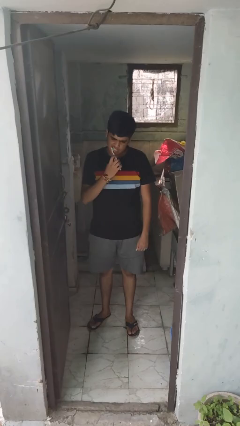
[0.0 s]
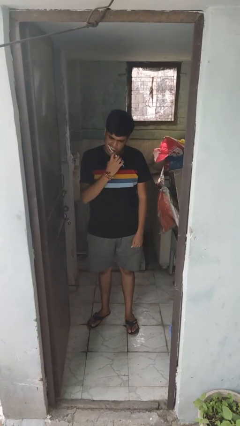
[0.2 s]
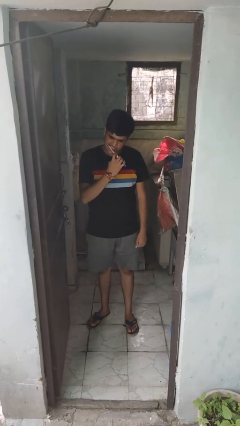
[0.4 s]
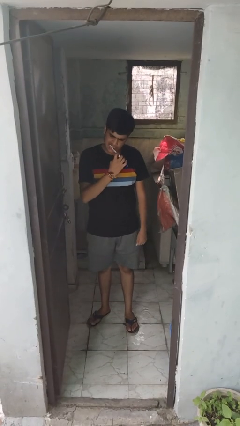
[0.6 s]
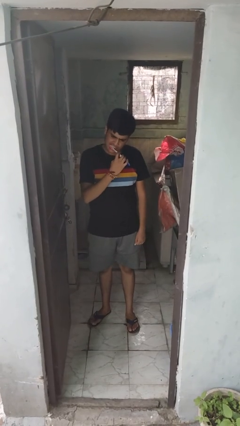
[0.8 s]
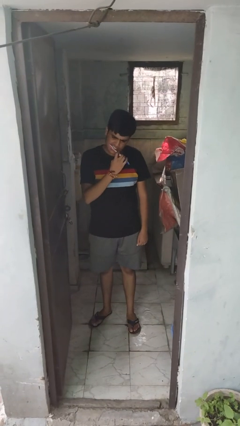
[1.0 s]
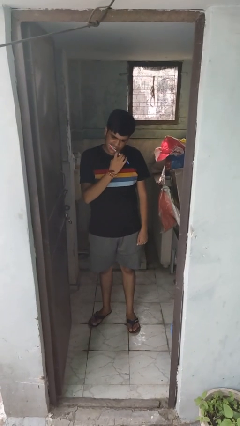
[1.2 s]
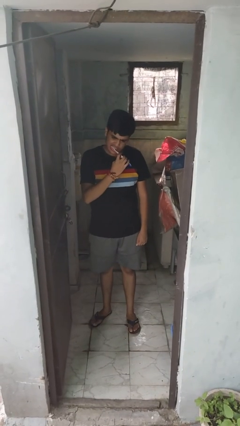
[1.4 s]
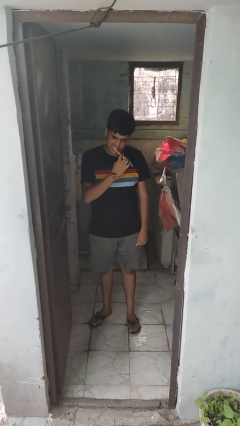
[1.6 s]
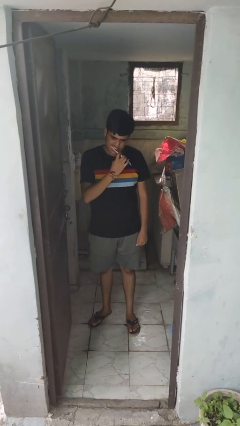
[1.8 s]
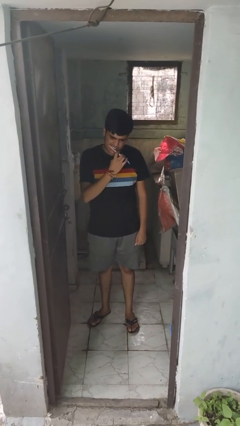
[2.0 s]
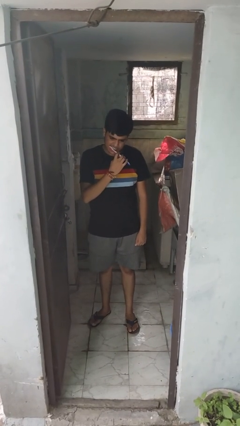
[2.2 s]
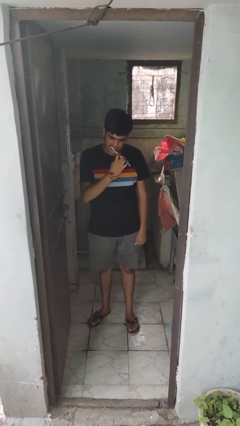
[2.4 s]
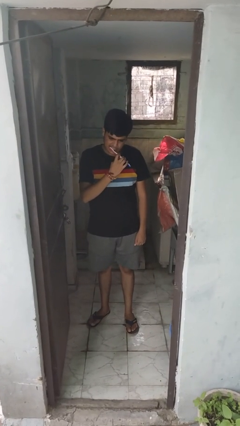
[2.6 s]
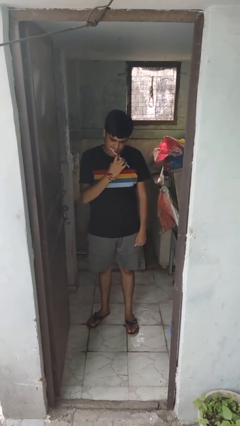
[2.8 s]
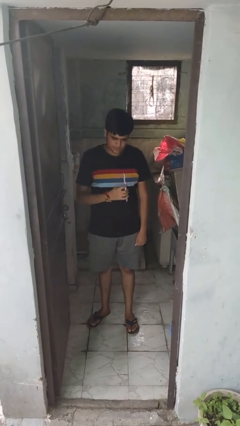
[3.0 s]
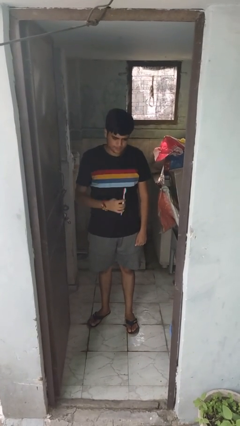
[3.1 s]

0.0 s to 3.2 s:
person brushes teeth

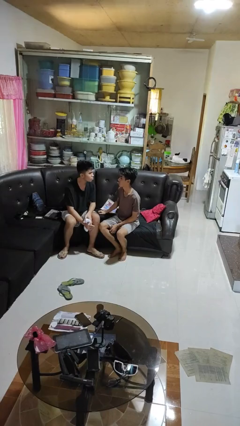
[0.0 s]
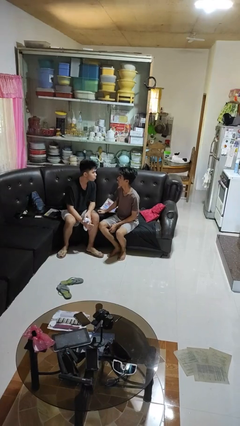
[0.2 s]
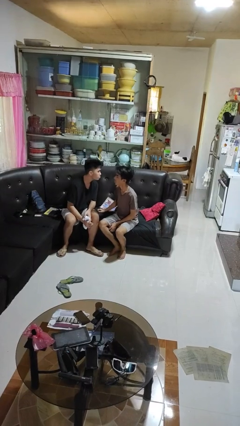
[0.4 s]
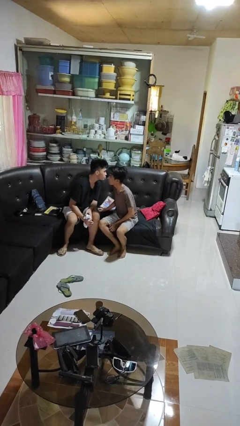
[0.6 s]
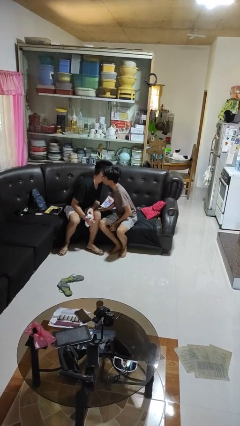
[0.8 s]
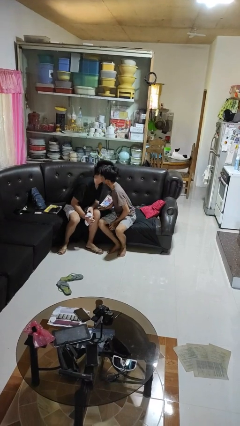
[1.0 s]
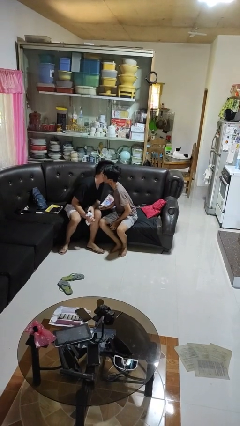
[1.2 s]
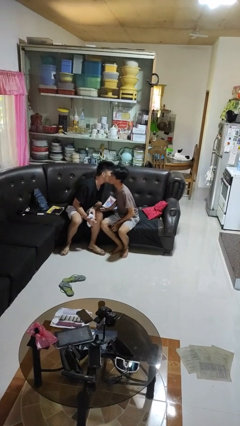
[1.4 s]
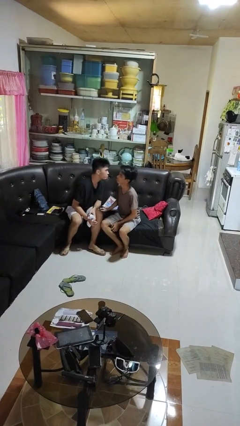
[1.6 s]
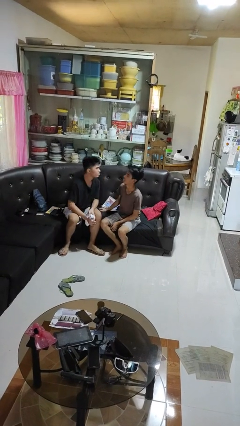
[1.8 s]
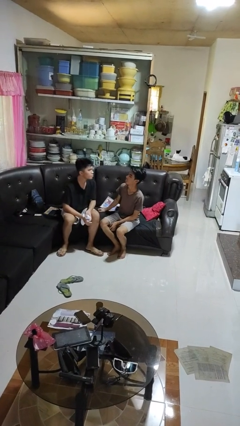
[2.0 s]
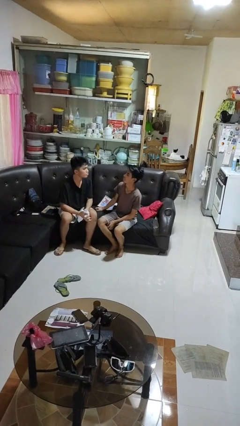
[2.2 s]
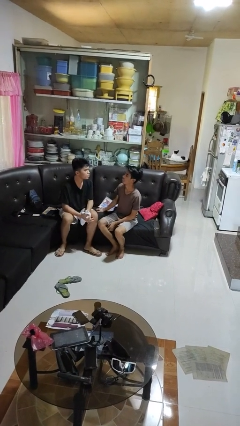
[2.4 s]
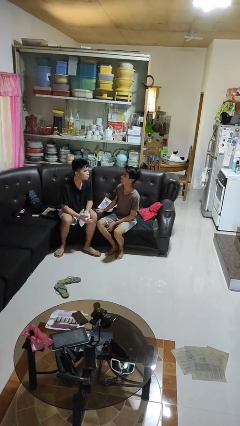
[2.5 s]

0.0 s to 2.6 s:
person kisses cheek of person

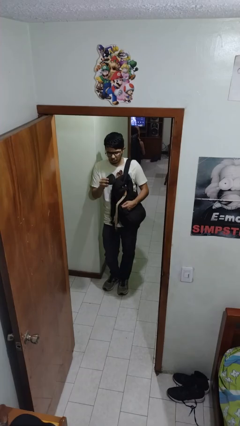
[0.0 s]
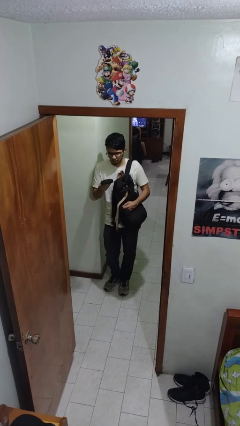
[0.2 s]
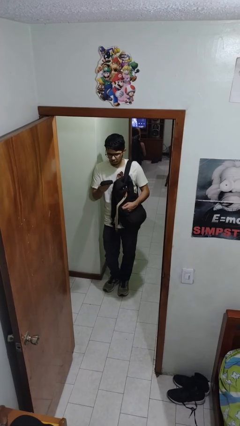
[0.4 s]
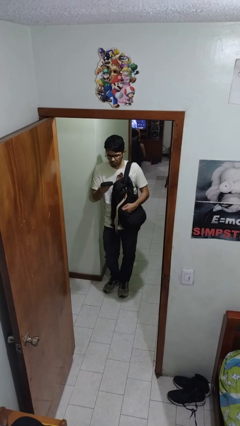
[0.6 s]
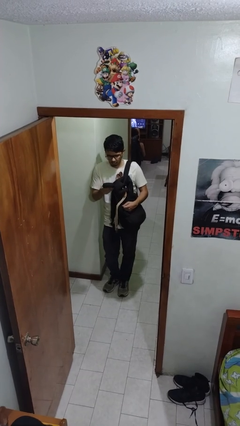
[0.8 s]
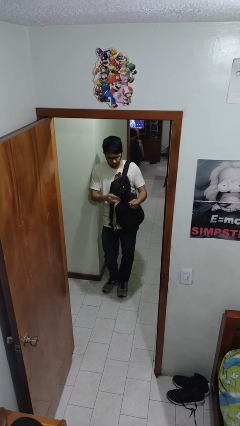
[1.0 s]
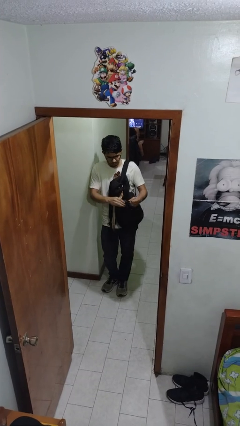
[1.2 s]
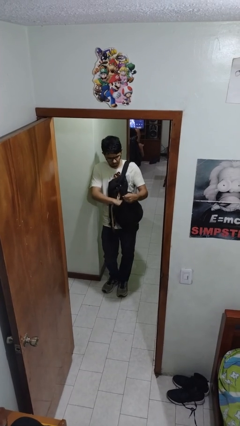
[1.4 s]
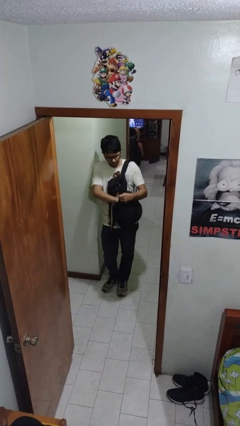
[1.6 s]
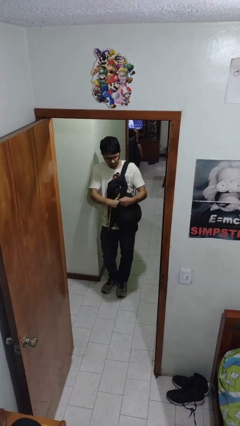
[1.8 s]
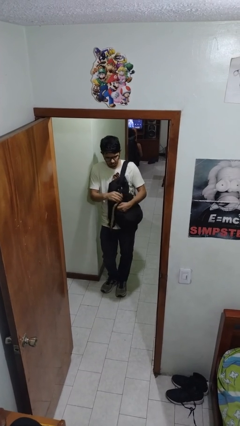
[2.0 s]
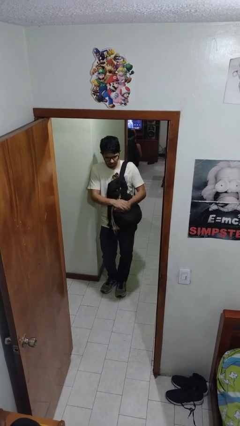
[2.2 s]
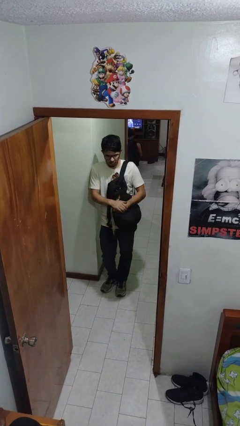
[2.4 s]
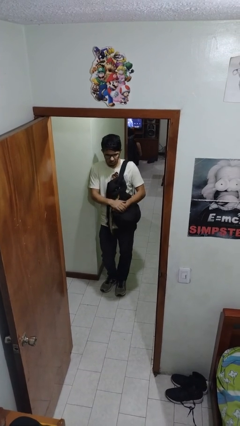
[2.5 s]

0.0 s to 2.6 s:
person puts object into backpack

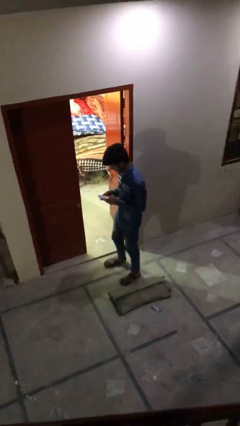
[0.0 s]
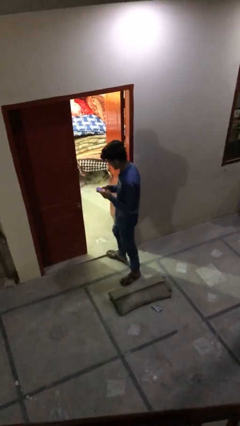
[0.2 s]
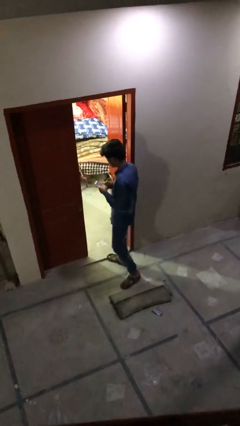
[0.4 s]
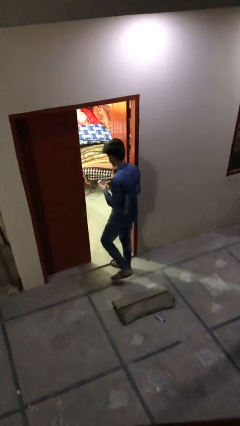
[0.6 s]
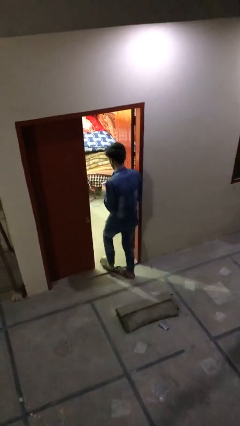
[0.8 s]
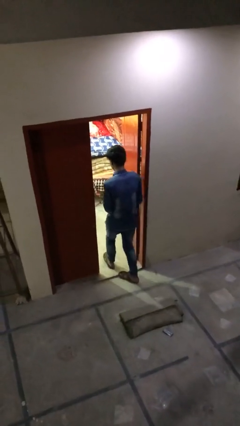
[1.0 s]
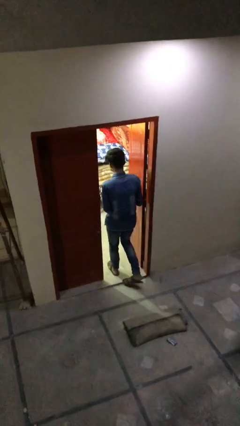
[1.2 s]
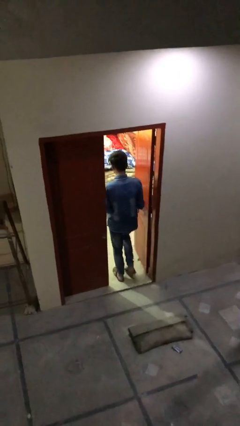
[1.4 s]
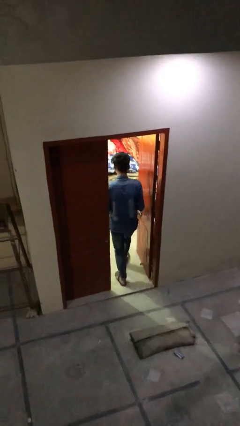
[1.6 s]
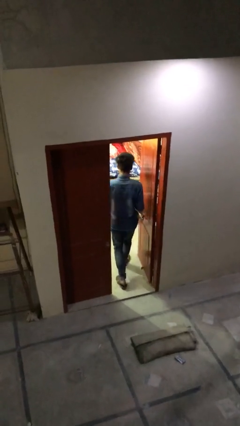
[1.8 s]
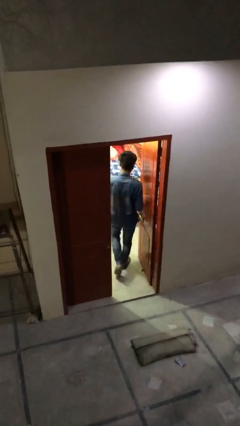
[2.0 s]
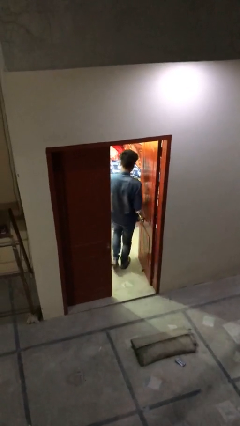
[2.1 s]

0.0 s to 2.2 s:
person exits scene through structure

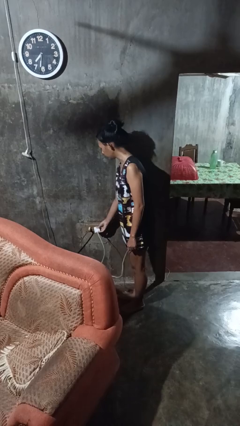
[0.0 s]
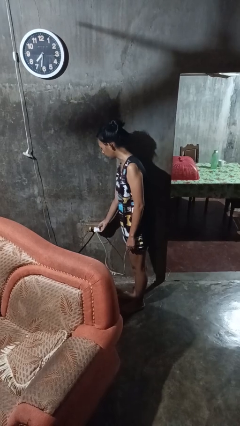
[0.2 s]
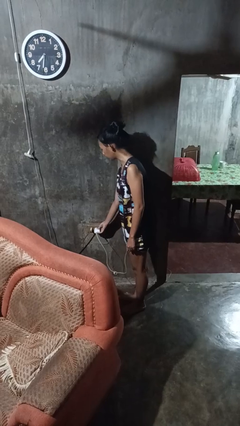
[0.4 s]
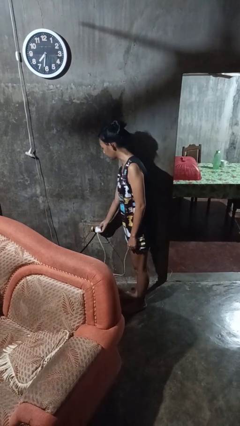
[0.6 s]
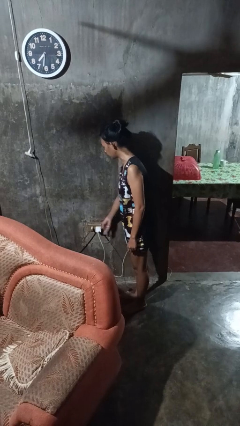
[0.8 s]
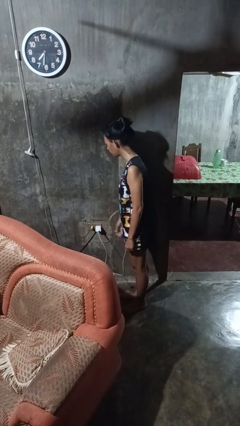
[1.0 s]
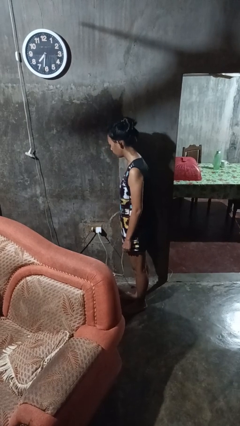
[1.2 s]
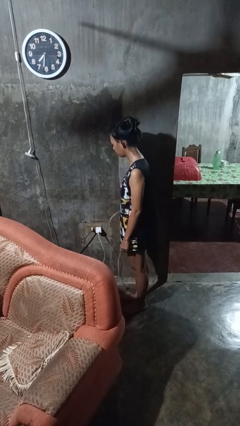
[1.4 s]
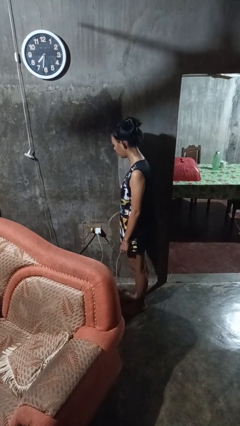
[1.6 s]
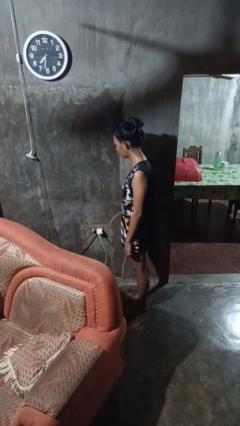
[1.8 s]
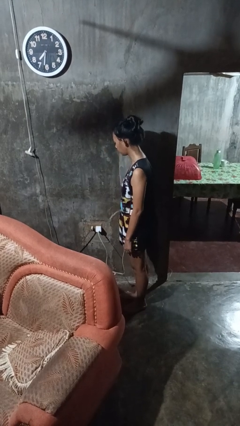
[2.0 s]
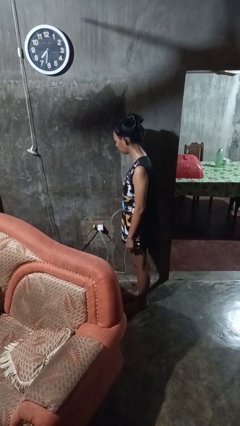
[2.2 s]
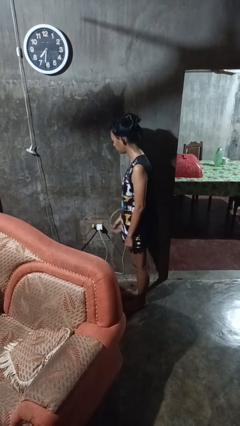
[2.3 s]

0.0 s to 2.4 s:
person plugs into electrical socket

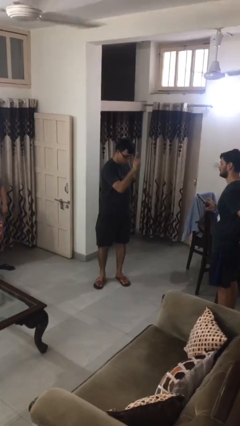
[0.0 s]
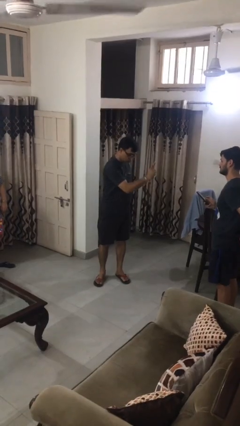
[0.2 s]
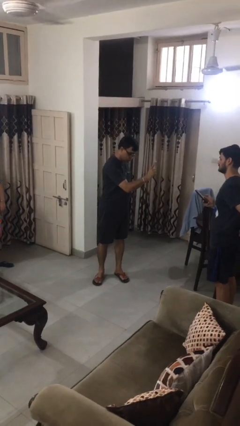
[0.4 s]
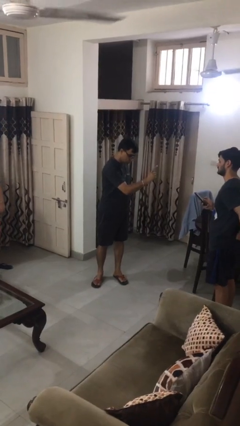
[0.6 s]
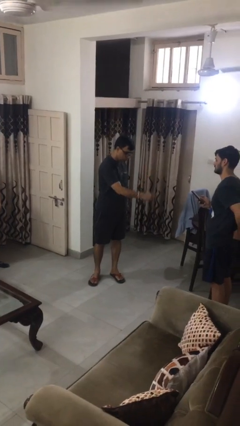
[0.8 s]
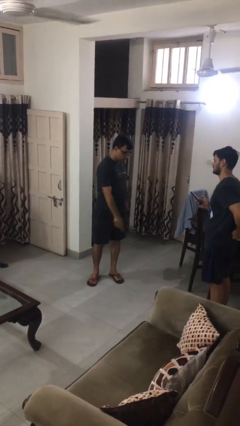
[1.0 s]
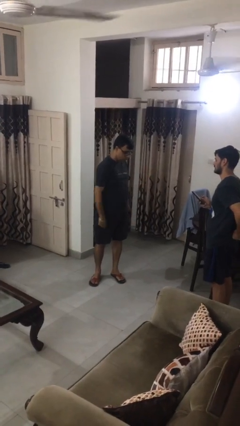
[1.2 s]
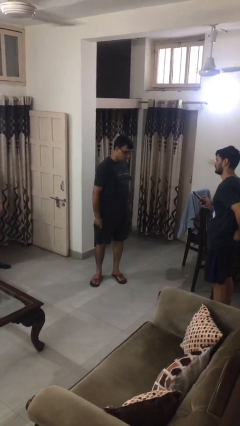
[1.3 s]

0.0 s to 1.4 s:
person points at person

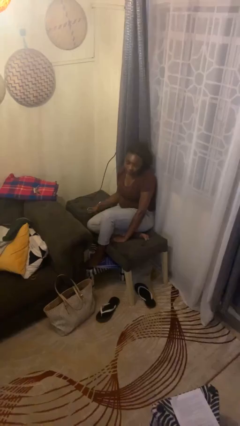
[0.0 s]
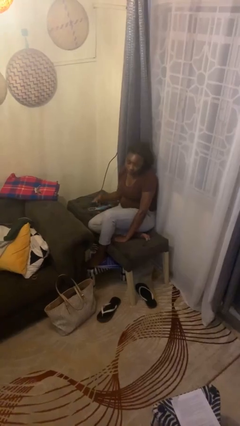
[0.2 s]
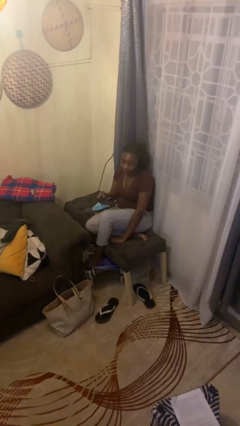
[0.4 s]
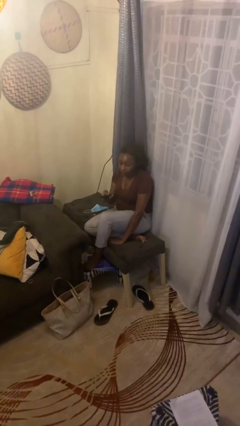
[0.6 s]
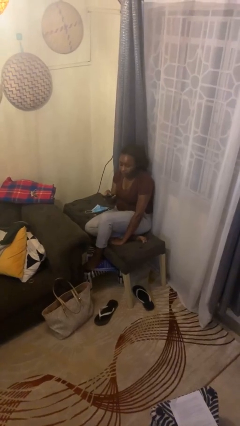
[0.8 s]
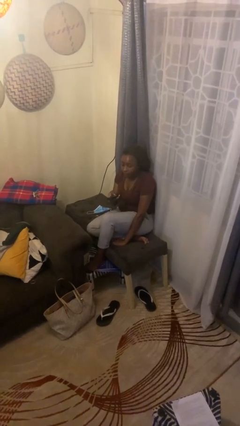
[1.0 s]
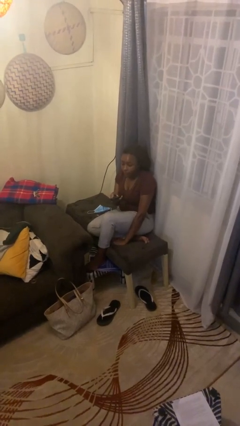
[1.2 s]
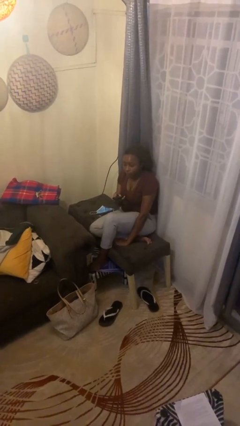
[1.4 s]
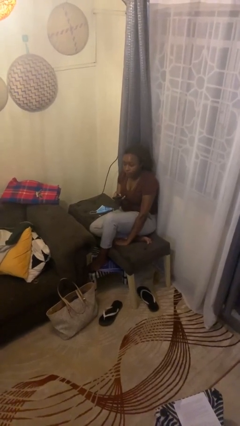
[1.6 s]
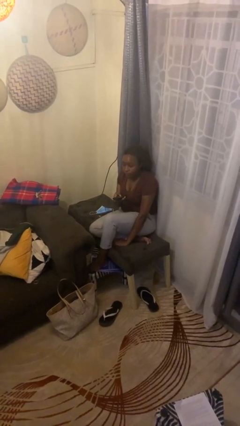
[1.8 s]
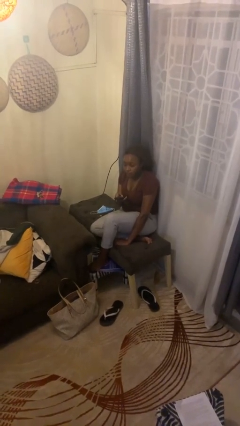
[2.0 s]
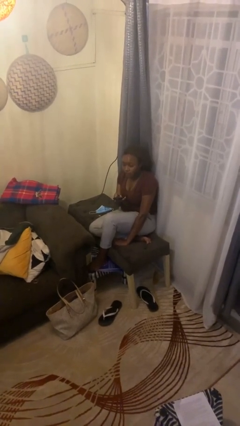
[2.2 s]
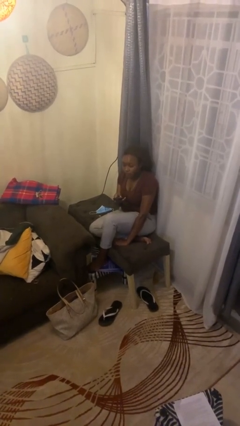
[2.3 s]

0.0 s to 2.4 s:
person uses television remote

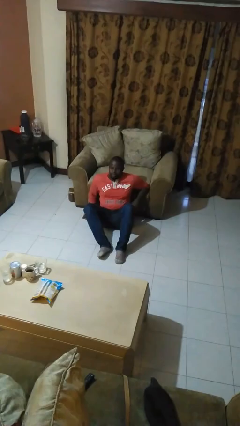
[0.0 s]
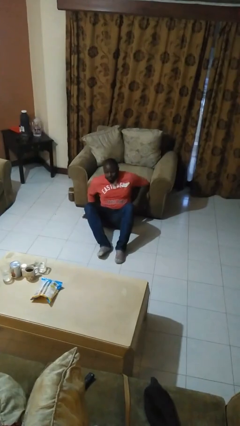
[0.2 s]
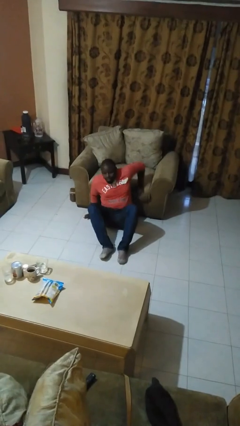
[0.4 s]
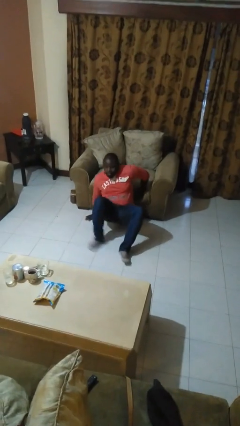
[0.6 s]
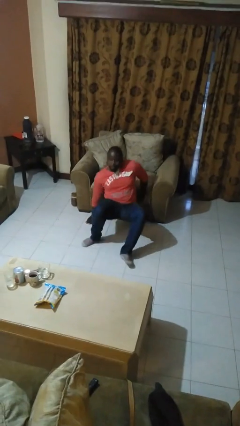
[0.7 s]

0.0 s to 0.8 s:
person falls from chair
